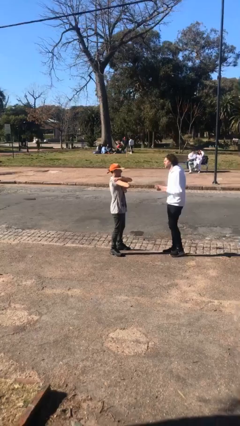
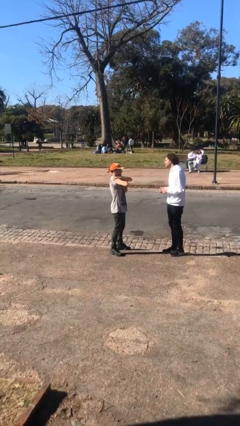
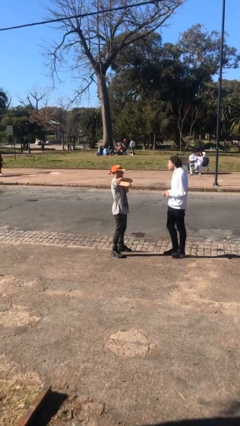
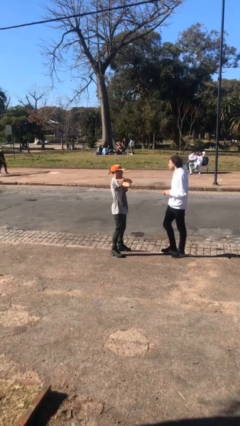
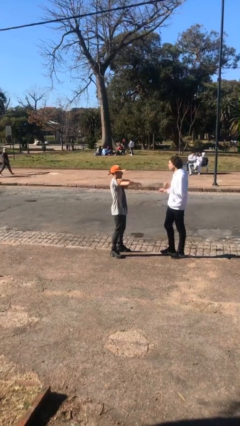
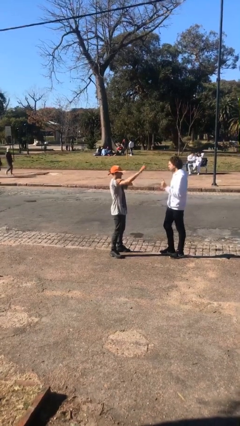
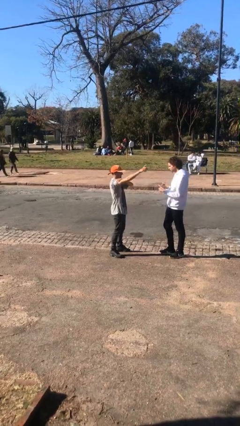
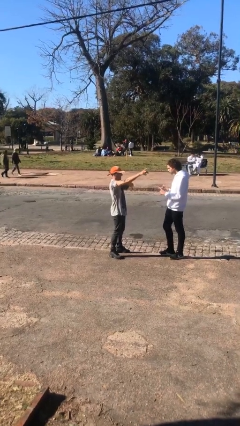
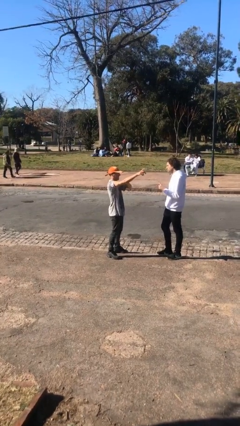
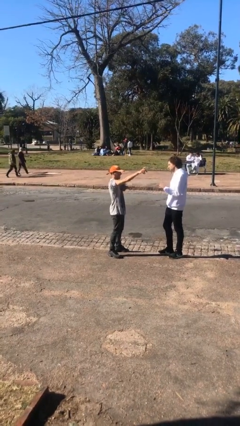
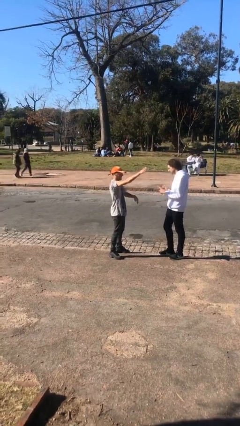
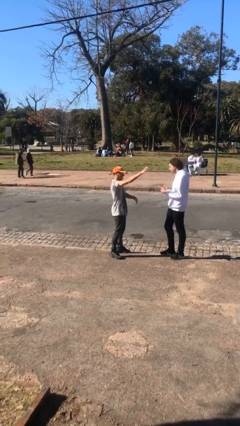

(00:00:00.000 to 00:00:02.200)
person talks to person

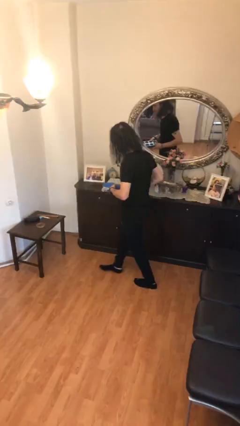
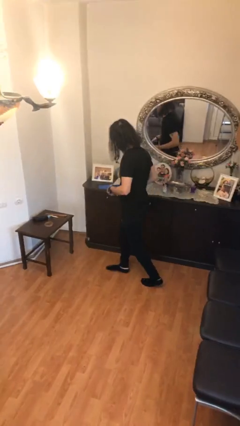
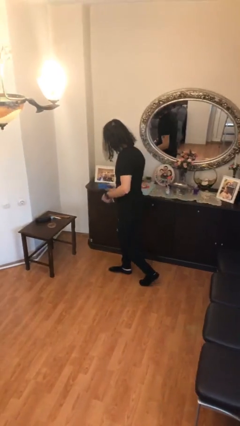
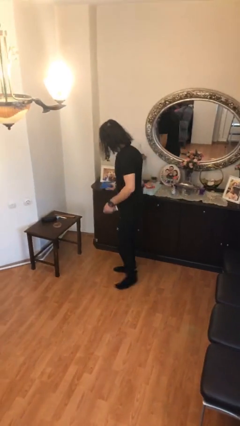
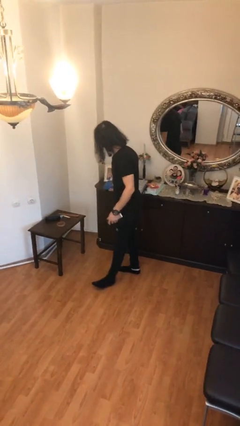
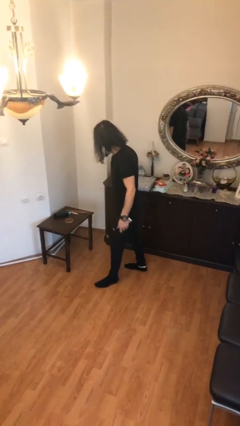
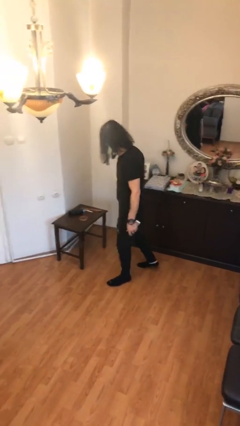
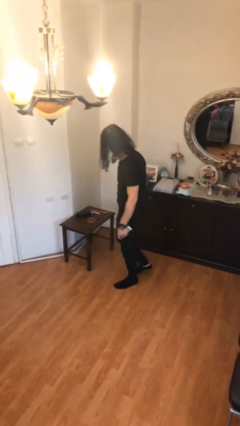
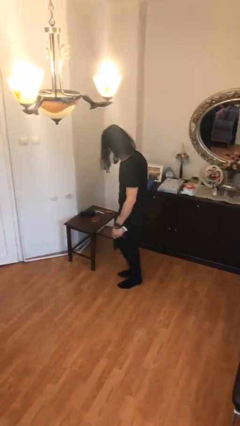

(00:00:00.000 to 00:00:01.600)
person puts down object on table

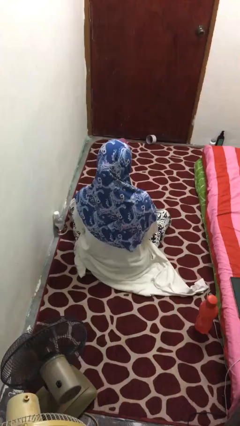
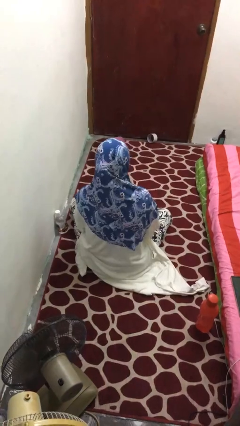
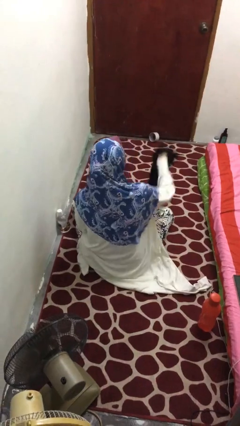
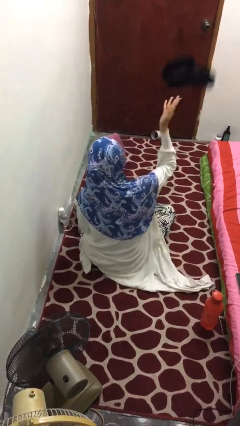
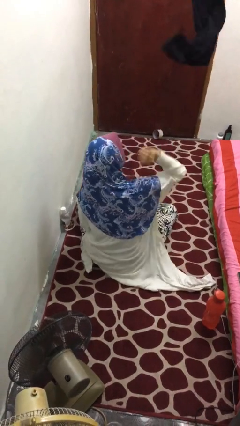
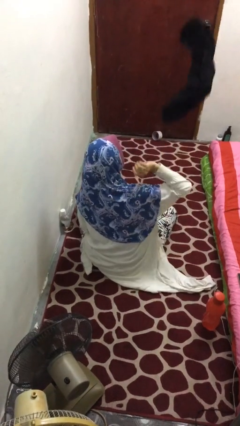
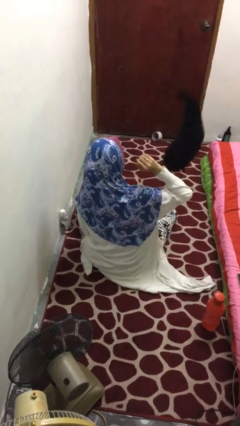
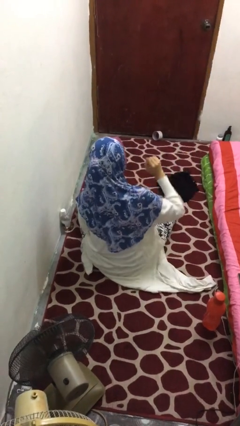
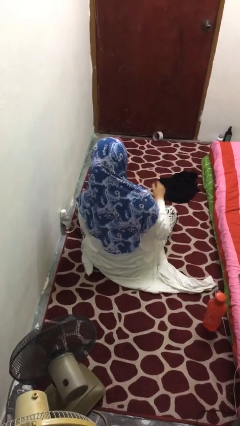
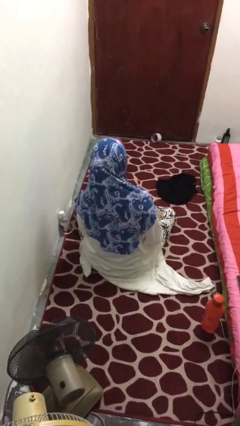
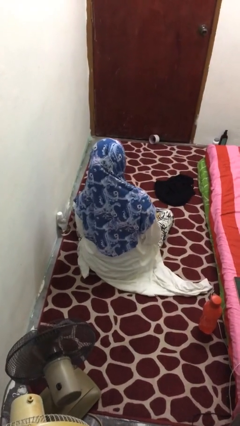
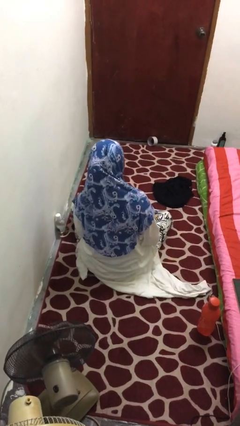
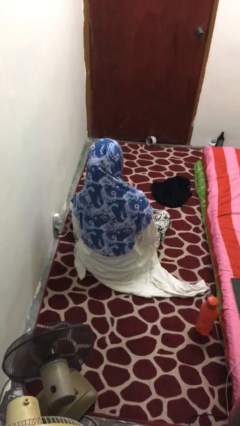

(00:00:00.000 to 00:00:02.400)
person throws object into air

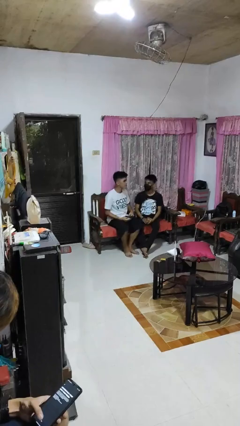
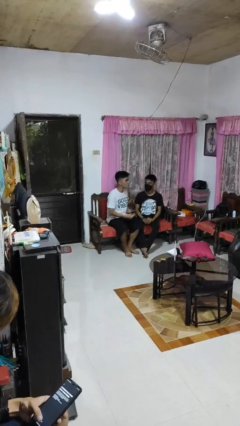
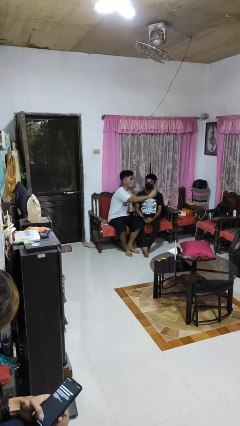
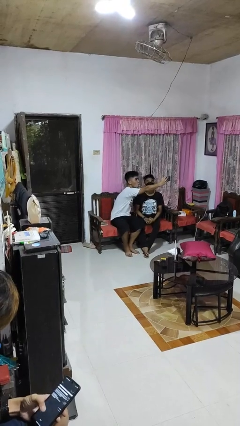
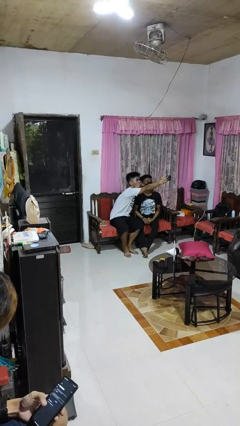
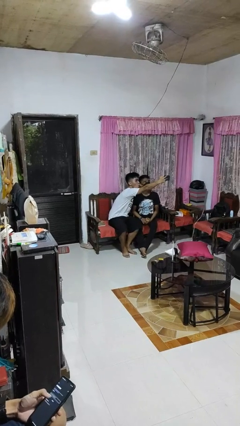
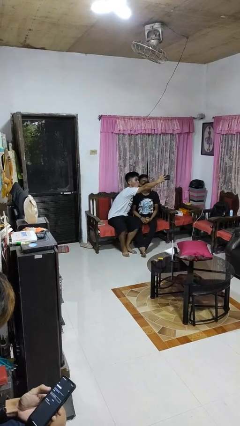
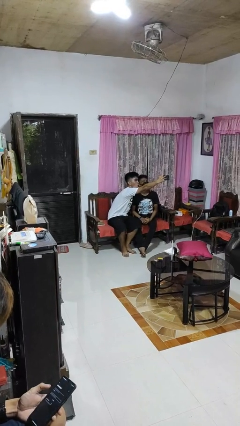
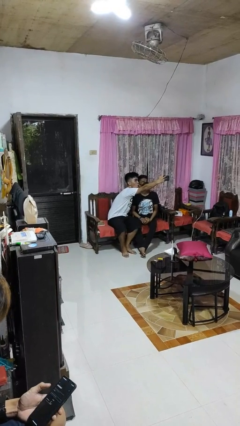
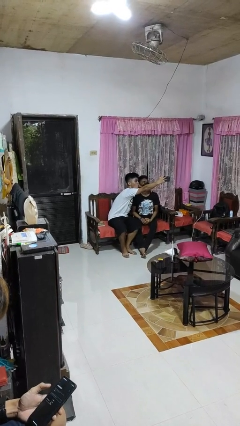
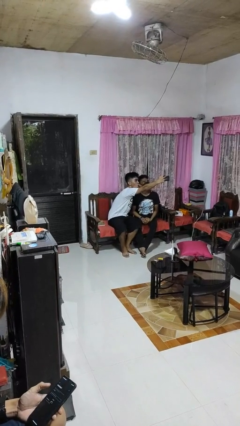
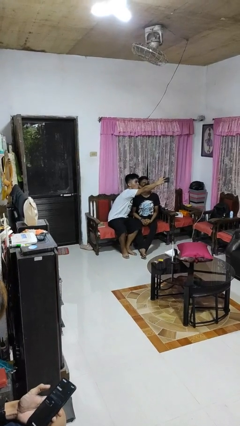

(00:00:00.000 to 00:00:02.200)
person takes selfie with person

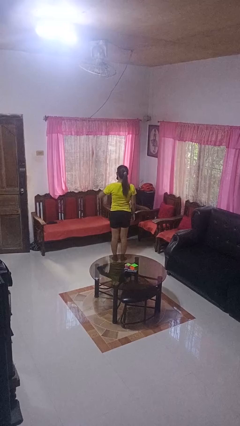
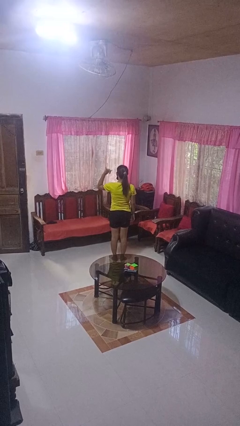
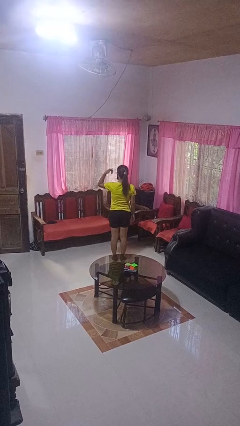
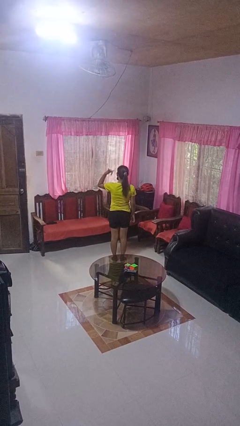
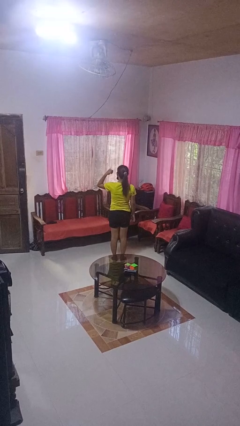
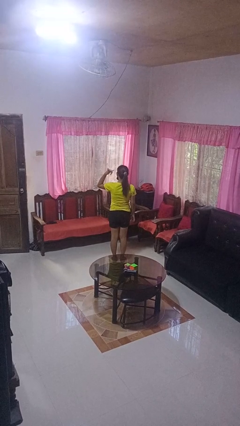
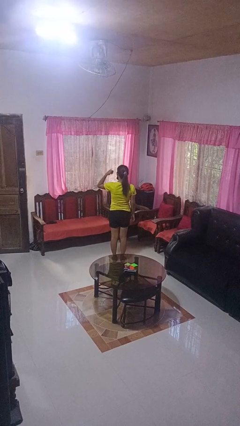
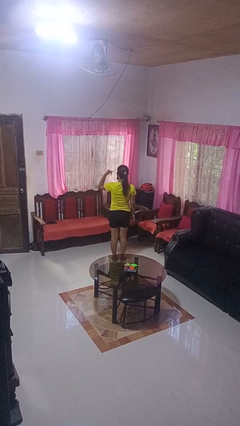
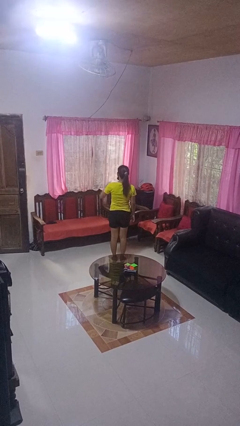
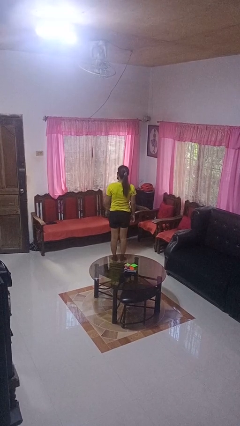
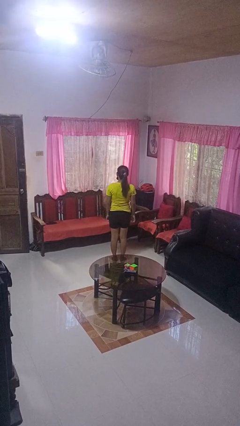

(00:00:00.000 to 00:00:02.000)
person gestures hang loose

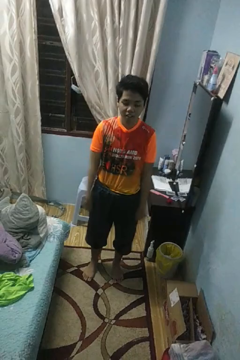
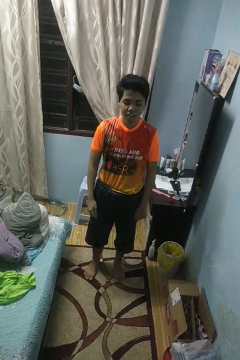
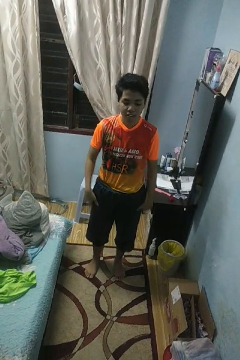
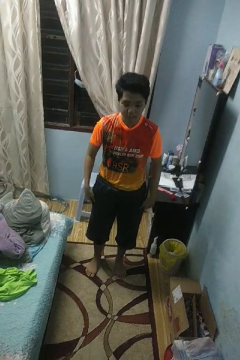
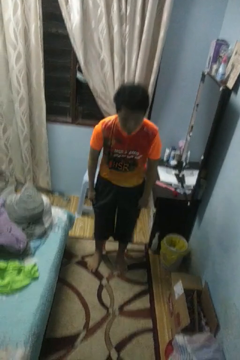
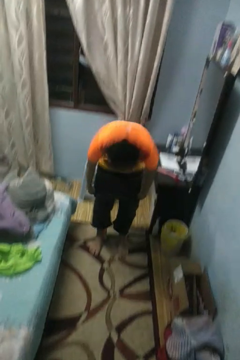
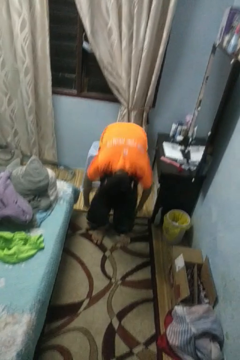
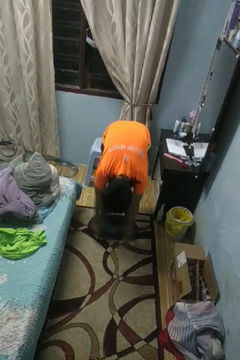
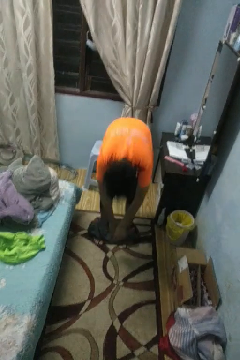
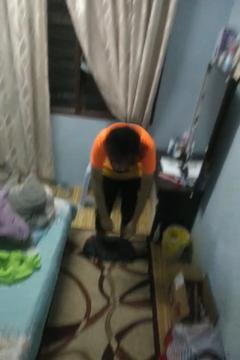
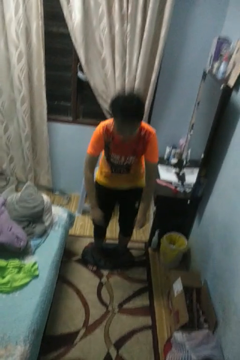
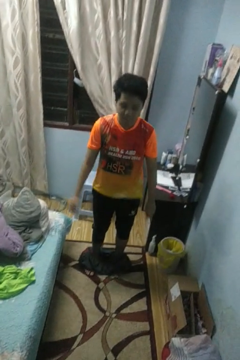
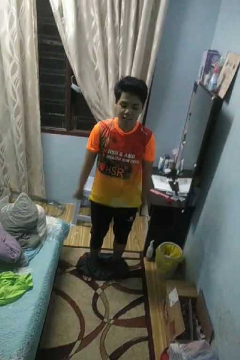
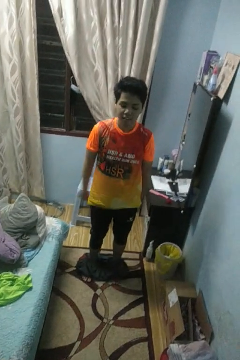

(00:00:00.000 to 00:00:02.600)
person takes off pants

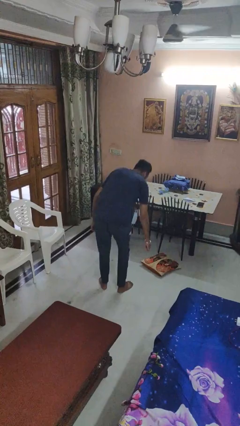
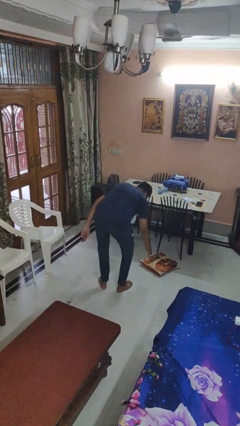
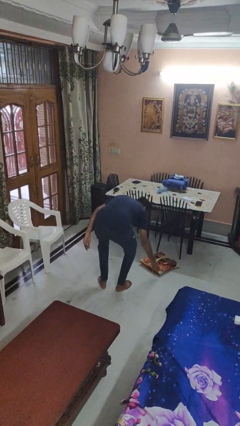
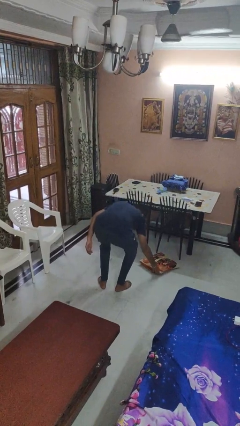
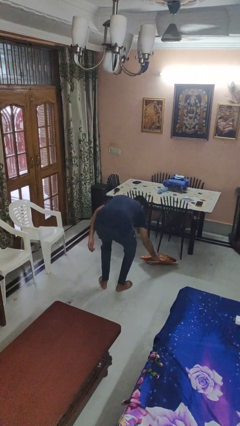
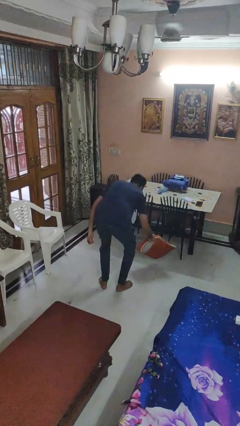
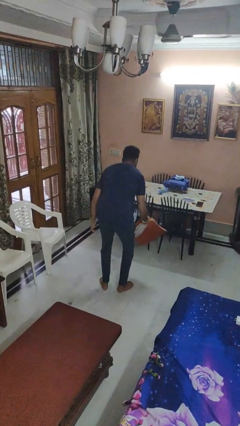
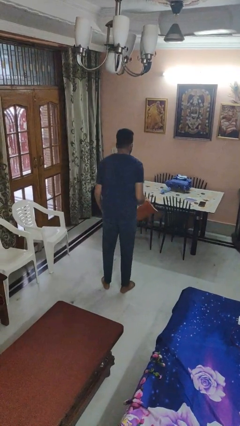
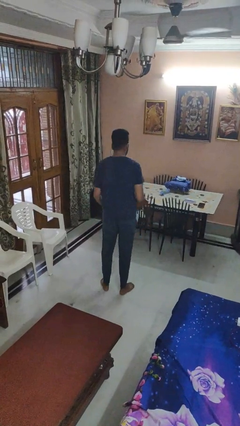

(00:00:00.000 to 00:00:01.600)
person picks up object from floor

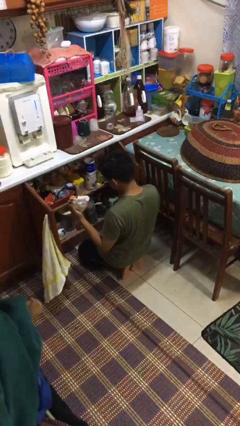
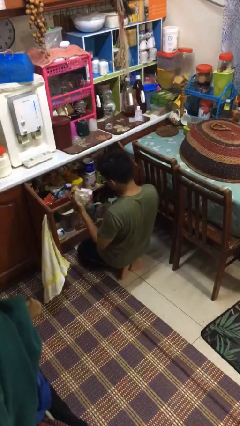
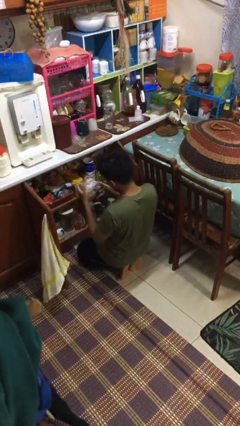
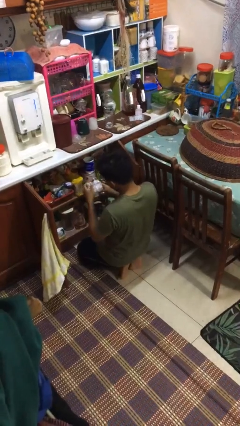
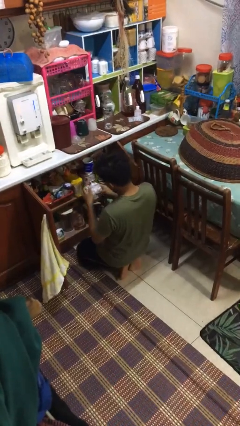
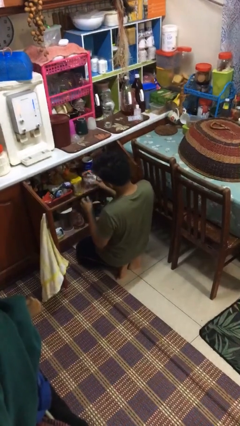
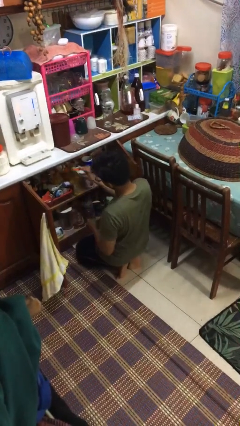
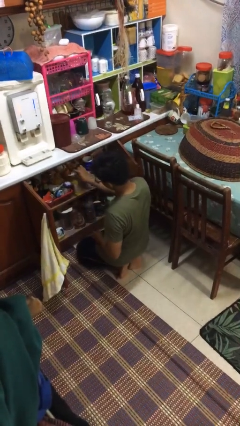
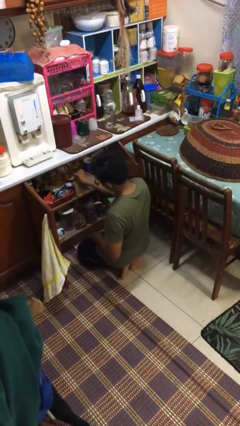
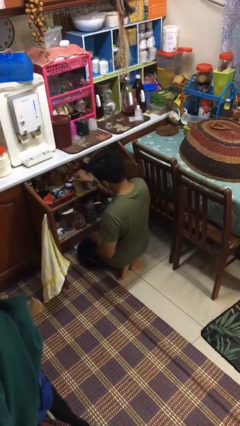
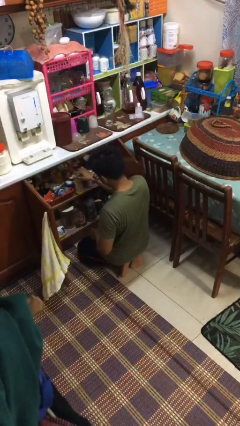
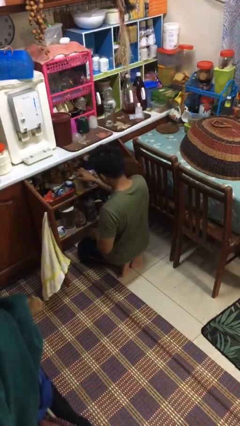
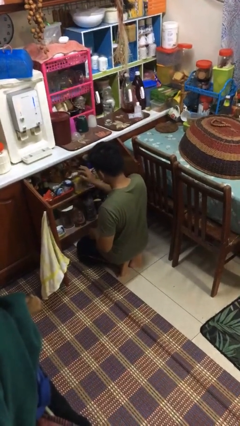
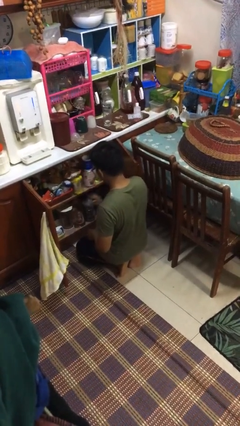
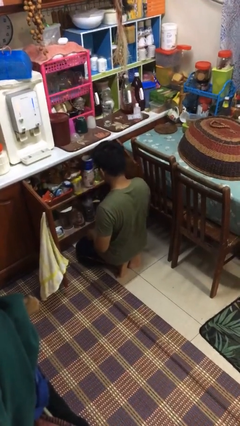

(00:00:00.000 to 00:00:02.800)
person puts object in cabinet
